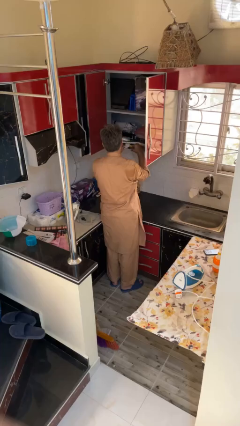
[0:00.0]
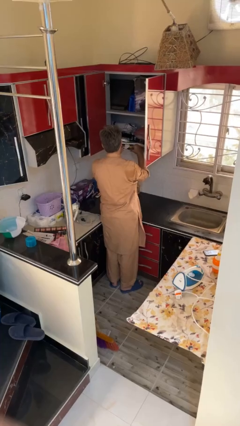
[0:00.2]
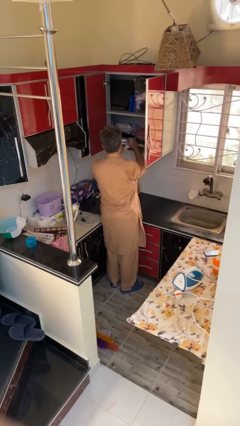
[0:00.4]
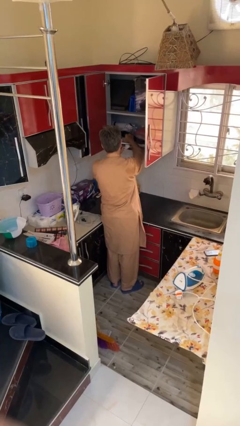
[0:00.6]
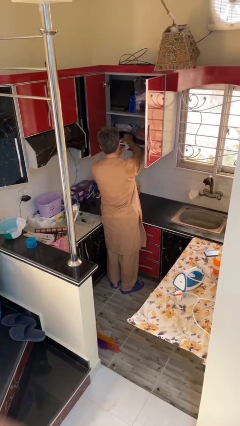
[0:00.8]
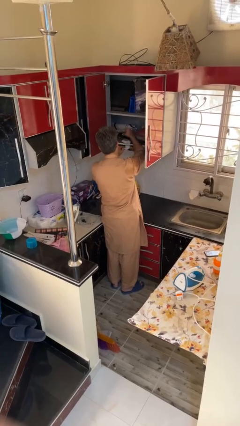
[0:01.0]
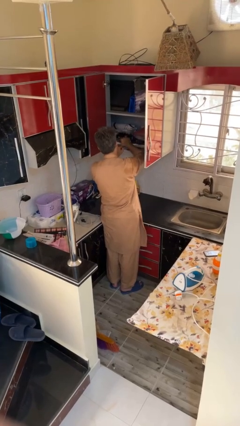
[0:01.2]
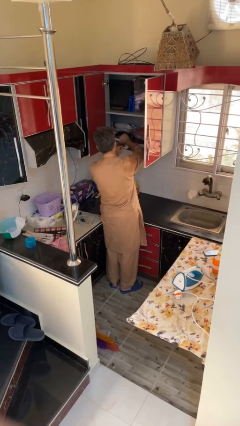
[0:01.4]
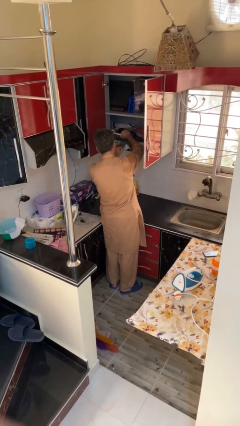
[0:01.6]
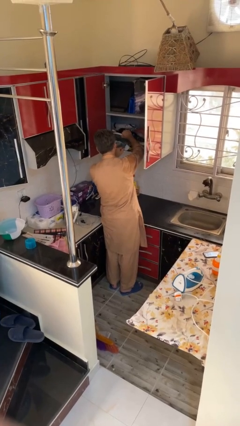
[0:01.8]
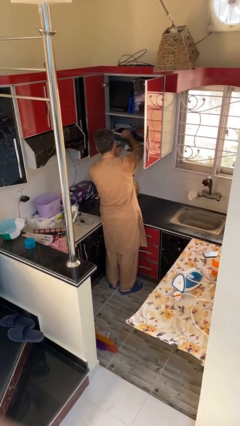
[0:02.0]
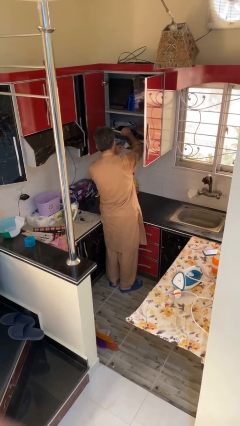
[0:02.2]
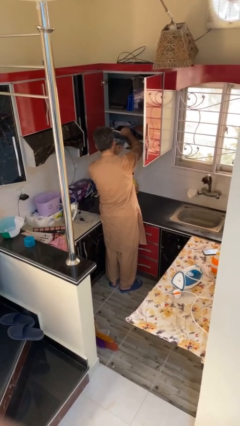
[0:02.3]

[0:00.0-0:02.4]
person searches in cabinet

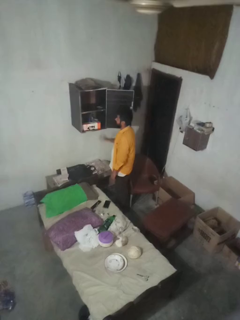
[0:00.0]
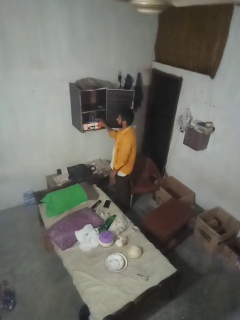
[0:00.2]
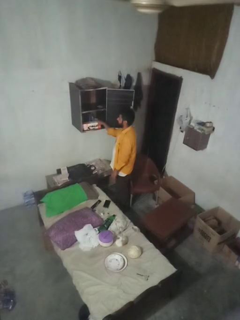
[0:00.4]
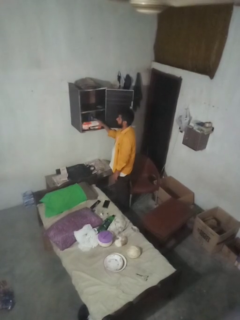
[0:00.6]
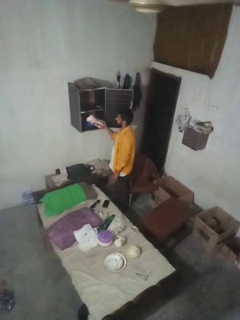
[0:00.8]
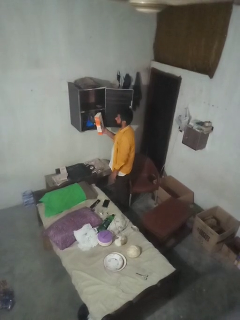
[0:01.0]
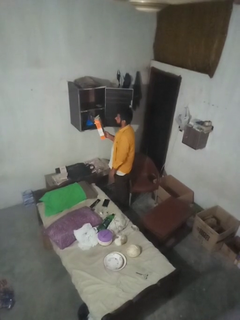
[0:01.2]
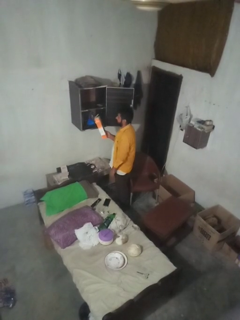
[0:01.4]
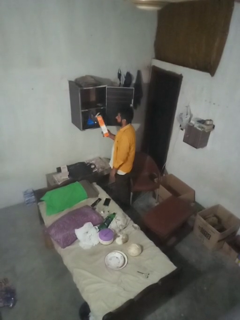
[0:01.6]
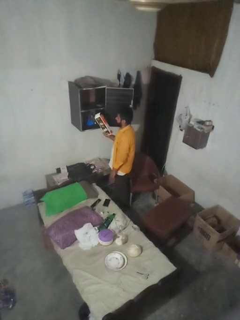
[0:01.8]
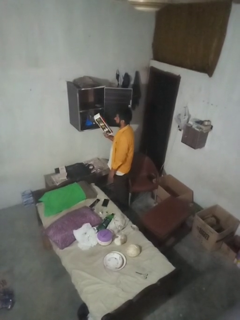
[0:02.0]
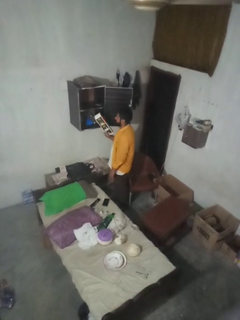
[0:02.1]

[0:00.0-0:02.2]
person picks up object from cabinet

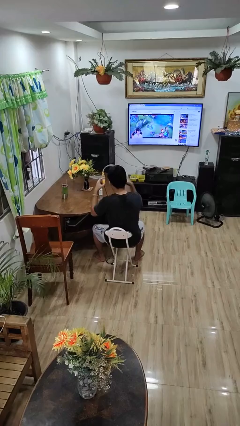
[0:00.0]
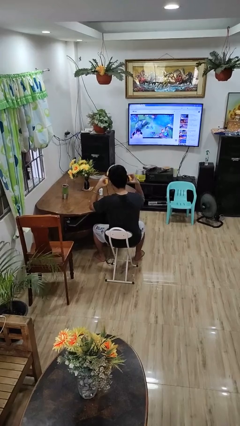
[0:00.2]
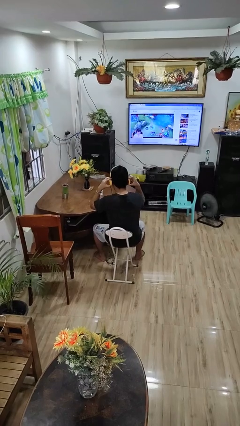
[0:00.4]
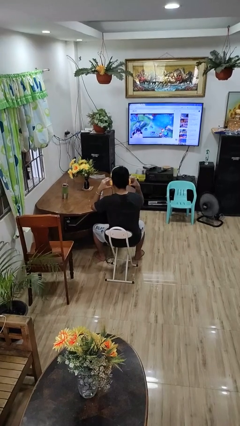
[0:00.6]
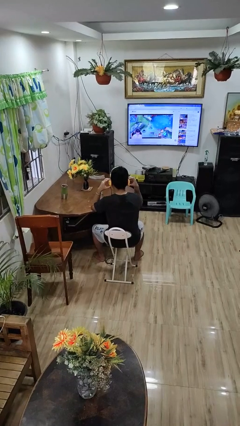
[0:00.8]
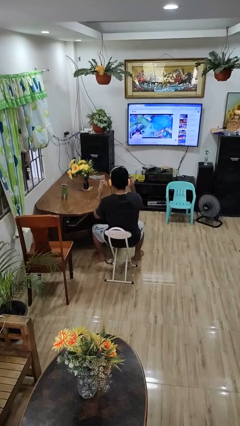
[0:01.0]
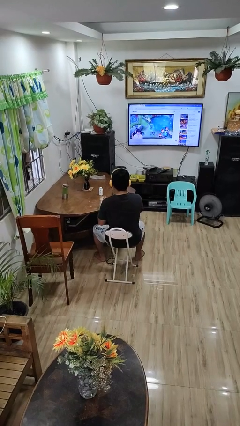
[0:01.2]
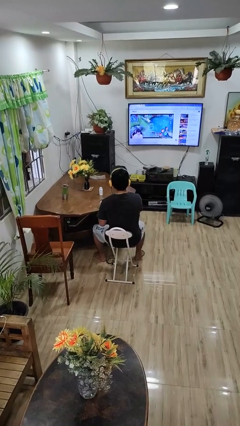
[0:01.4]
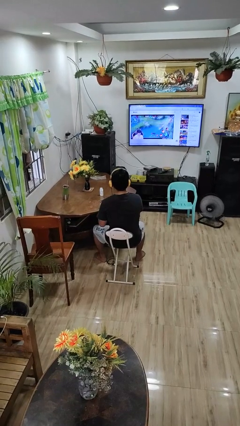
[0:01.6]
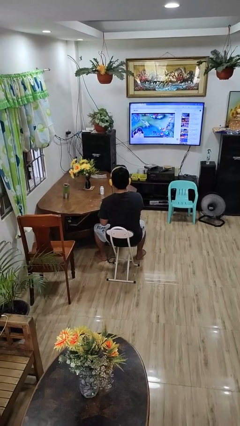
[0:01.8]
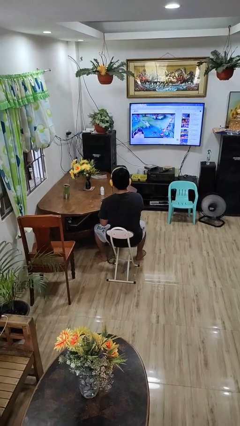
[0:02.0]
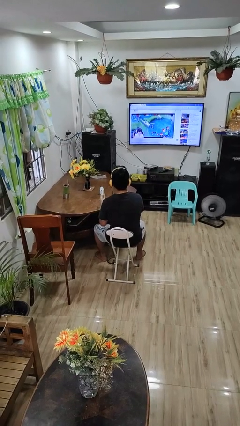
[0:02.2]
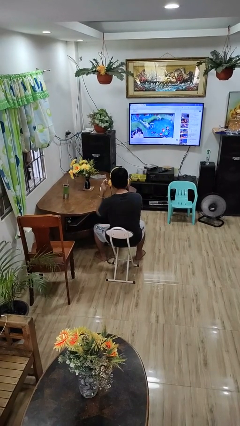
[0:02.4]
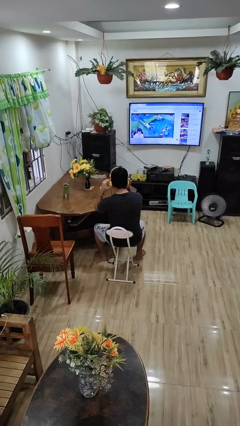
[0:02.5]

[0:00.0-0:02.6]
person puts on headphones

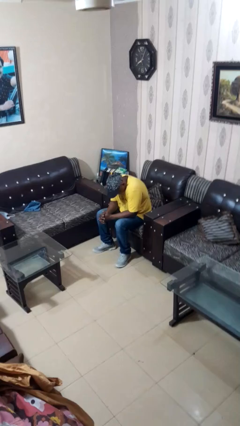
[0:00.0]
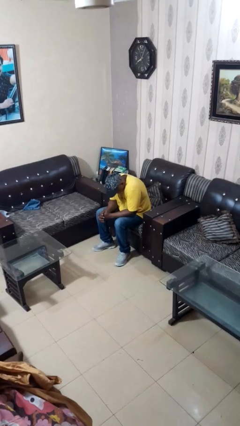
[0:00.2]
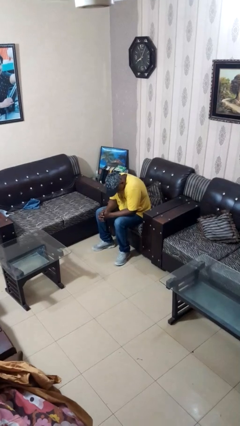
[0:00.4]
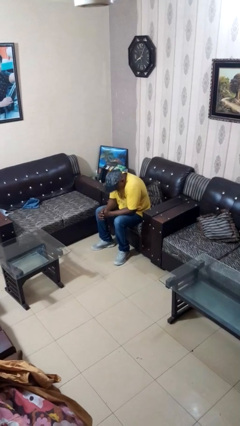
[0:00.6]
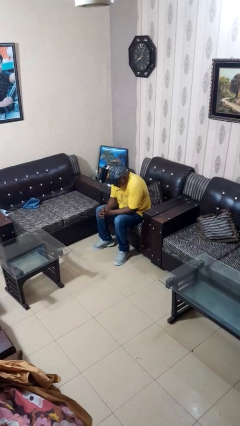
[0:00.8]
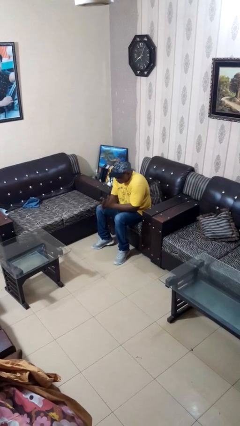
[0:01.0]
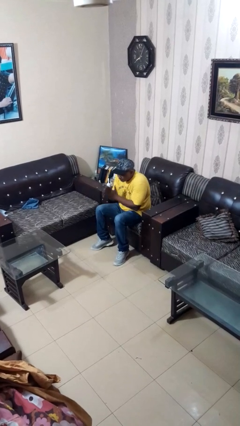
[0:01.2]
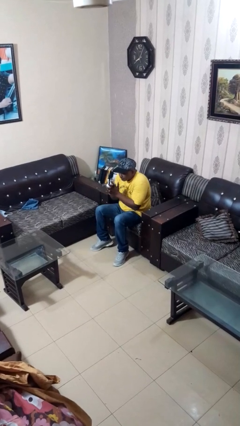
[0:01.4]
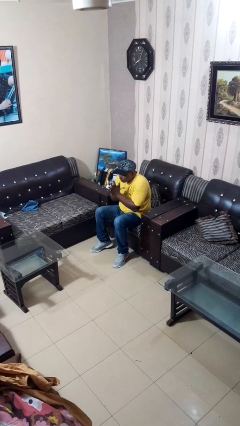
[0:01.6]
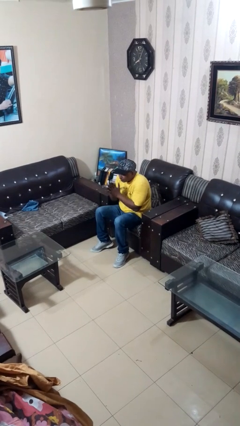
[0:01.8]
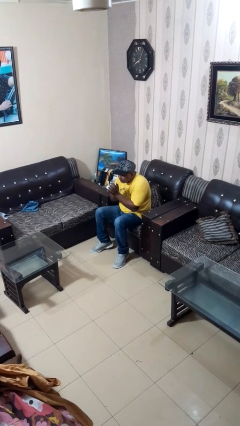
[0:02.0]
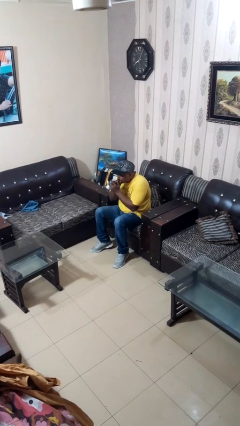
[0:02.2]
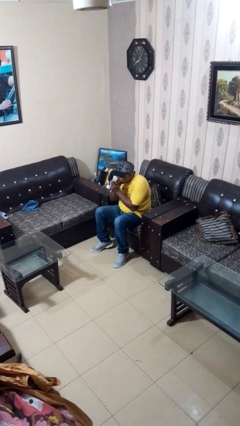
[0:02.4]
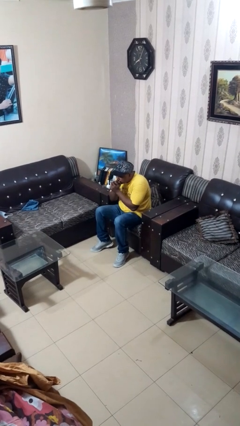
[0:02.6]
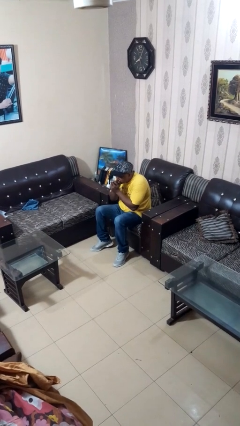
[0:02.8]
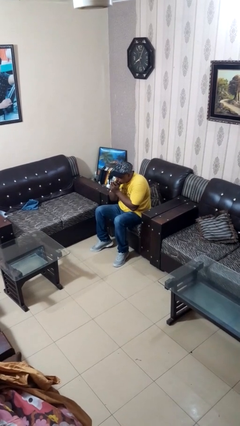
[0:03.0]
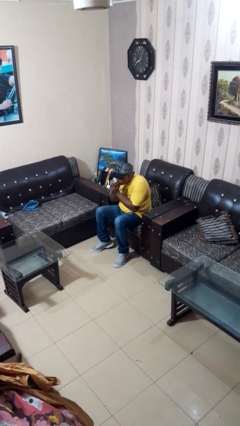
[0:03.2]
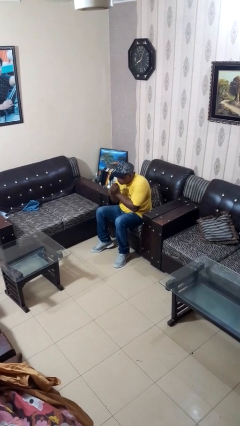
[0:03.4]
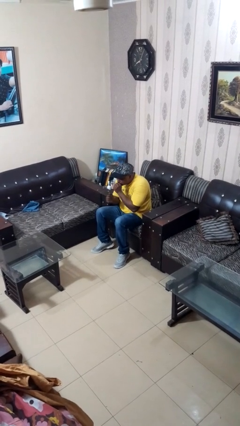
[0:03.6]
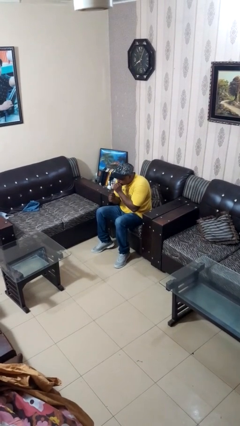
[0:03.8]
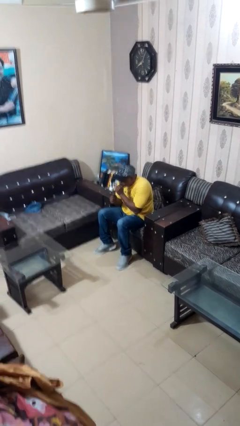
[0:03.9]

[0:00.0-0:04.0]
person blows into hands

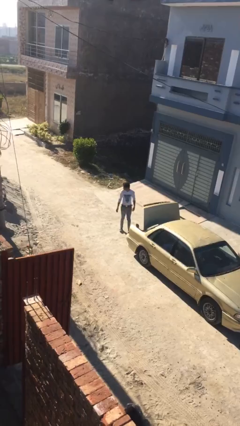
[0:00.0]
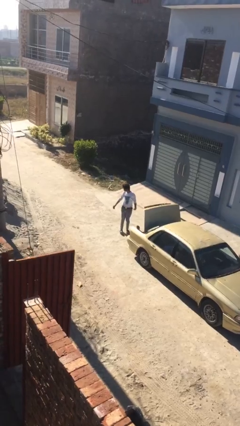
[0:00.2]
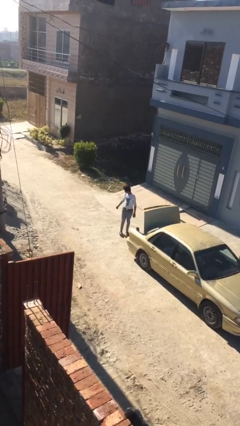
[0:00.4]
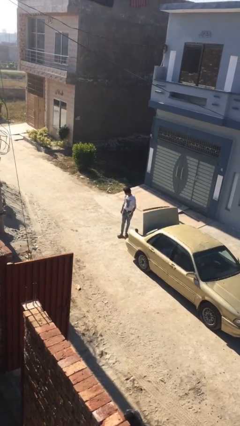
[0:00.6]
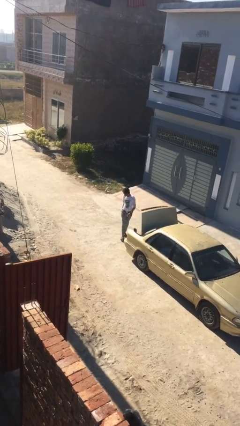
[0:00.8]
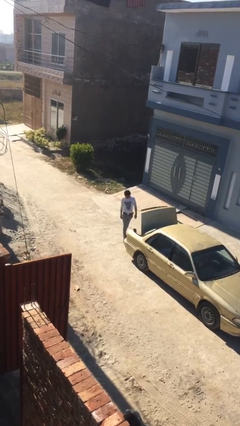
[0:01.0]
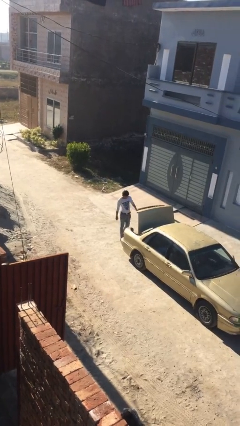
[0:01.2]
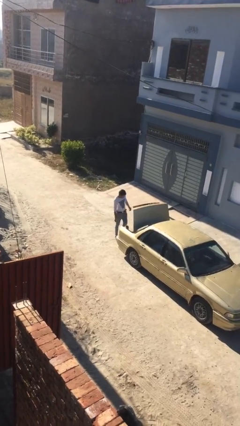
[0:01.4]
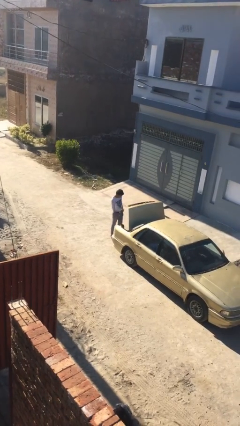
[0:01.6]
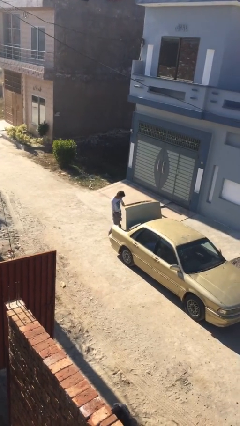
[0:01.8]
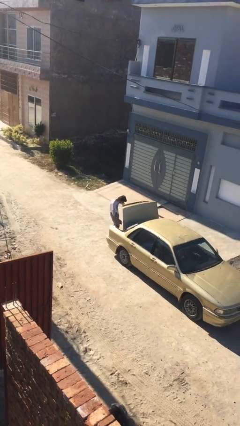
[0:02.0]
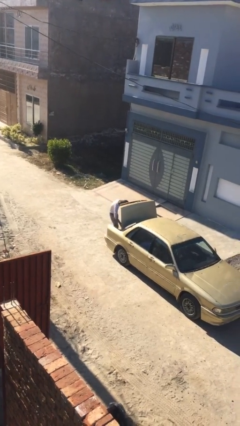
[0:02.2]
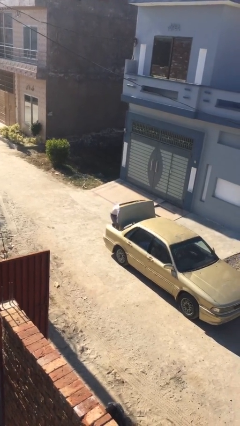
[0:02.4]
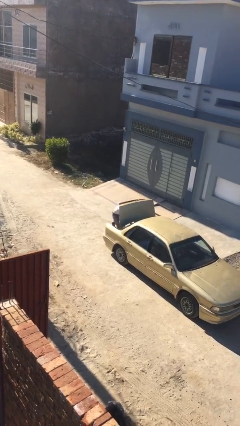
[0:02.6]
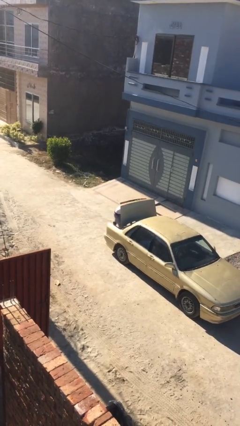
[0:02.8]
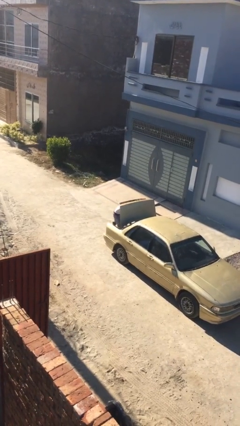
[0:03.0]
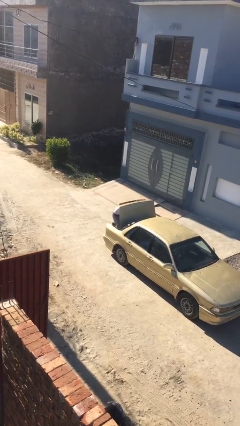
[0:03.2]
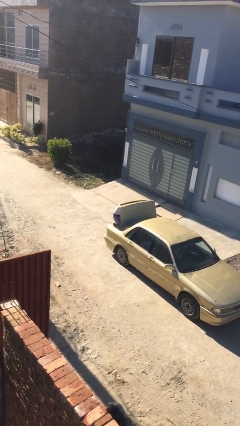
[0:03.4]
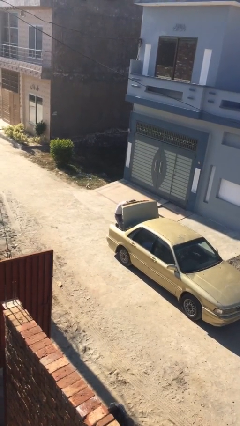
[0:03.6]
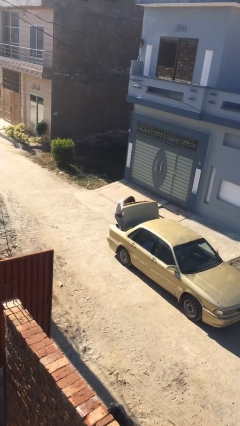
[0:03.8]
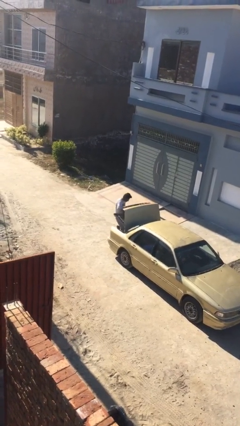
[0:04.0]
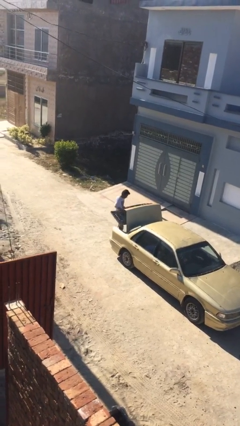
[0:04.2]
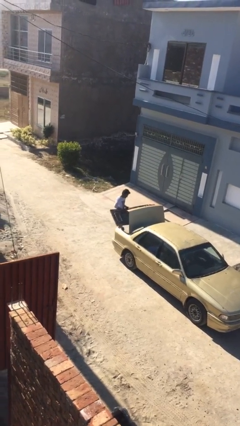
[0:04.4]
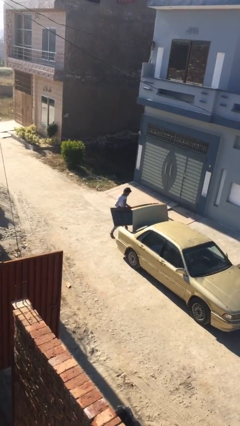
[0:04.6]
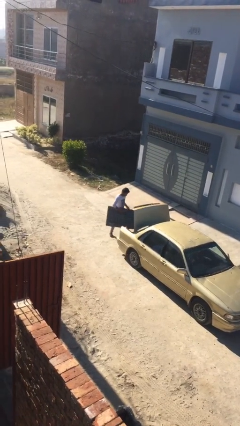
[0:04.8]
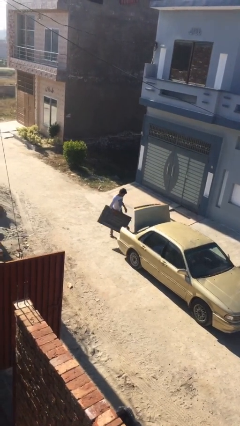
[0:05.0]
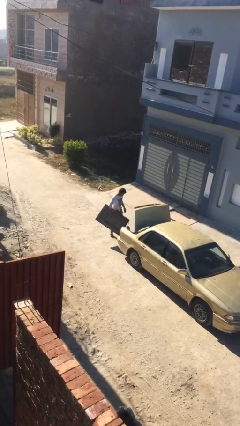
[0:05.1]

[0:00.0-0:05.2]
person unloads car

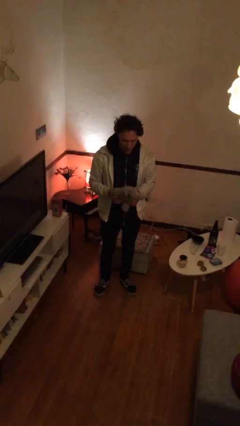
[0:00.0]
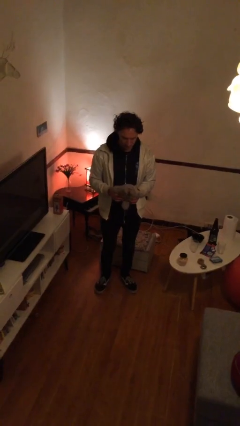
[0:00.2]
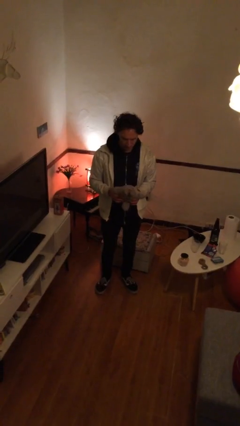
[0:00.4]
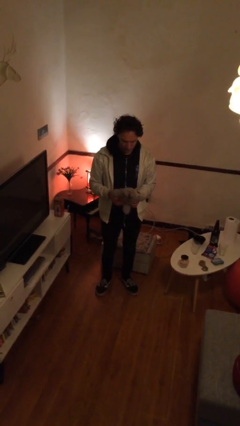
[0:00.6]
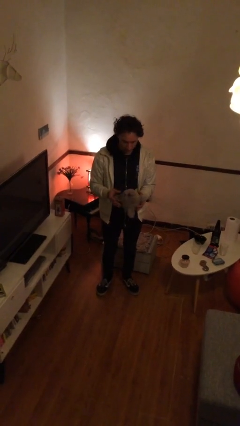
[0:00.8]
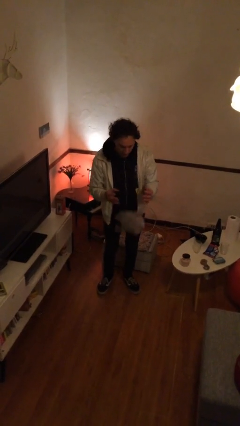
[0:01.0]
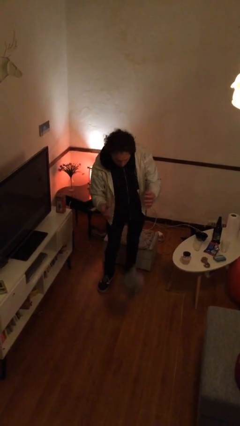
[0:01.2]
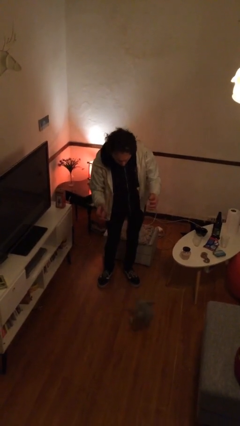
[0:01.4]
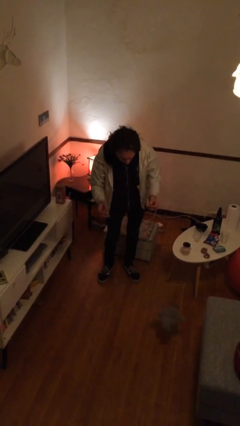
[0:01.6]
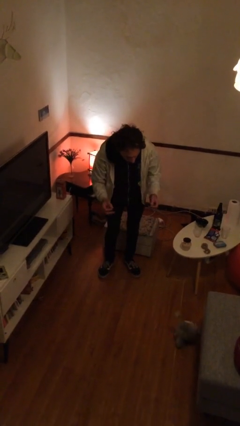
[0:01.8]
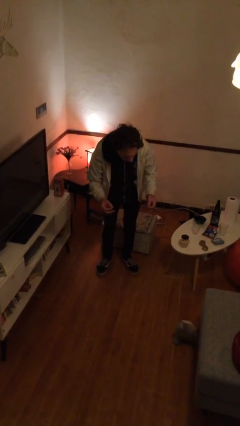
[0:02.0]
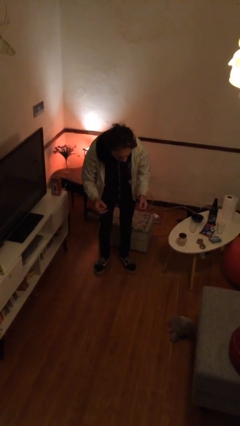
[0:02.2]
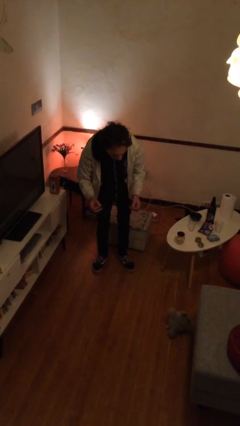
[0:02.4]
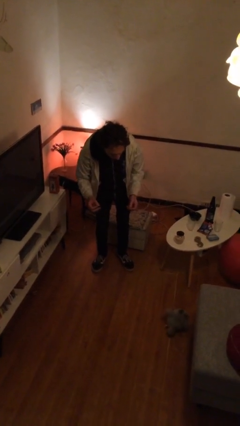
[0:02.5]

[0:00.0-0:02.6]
person drops object
